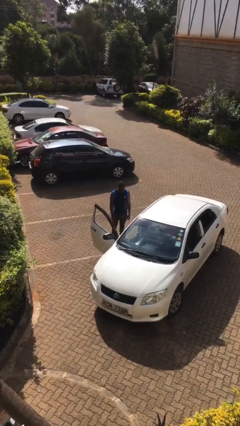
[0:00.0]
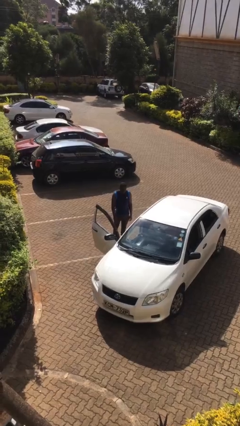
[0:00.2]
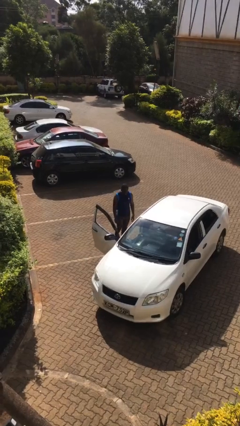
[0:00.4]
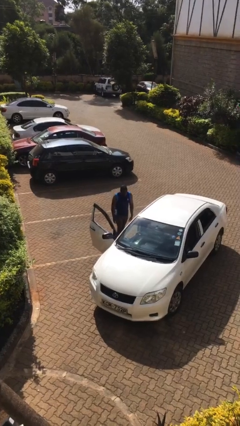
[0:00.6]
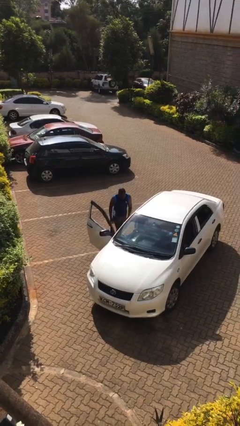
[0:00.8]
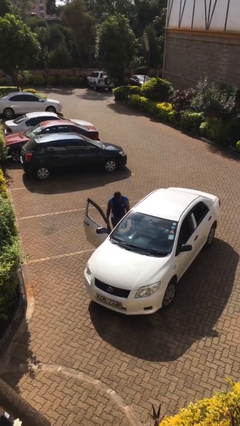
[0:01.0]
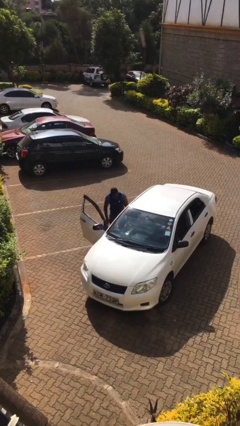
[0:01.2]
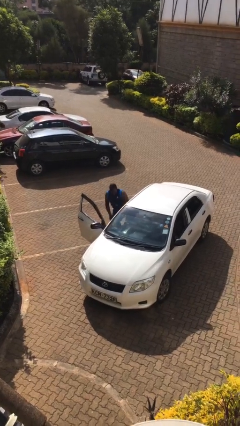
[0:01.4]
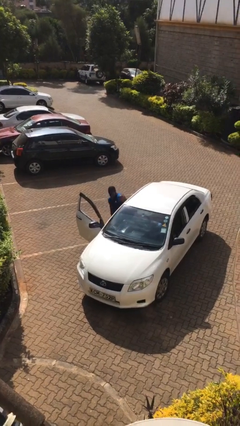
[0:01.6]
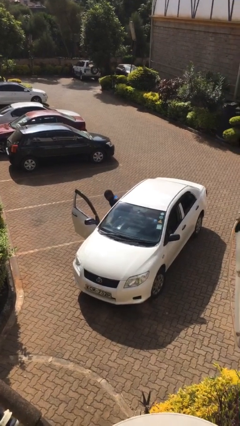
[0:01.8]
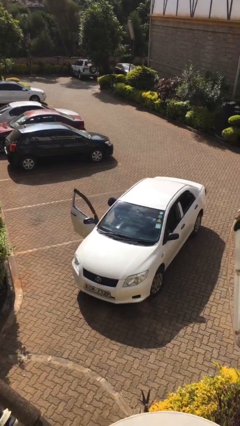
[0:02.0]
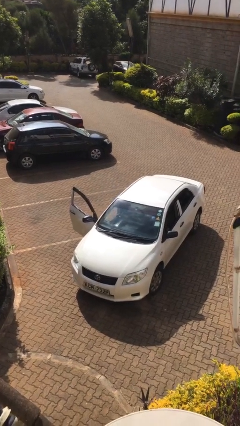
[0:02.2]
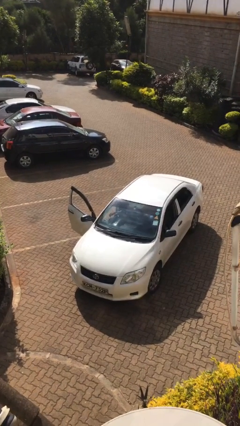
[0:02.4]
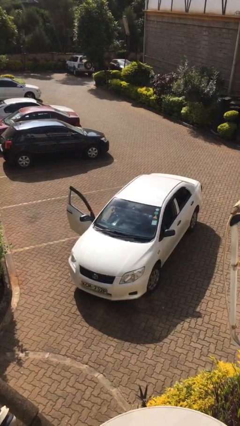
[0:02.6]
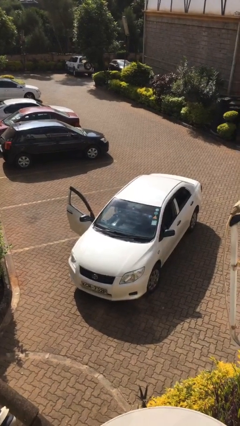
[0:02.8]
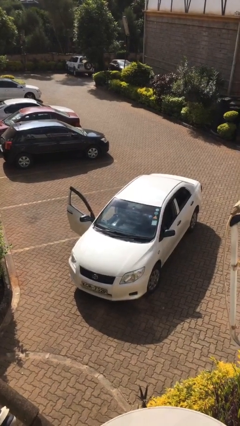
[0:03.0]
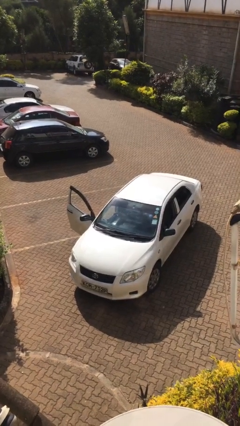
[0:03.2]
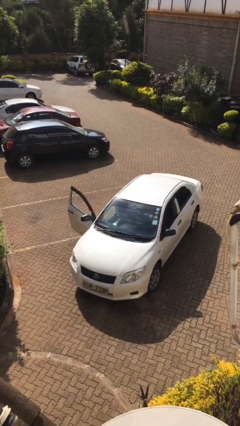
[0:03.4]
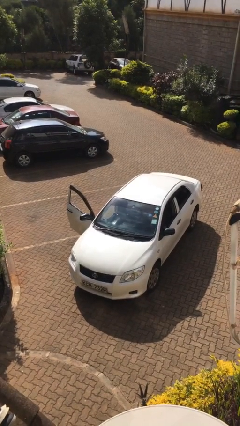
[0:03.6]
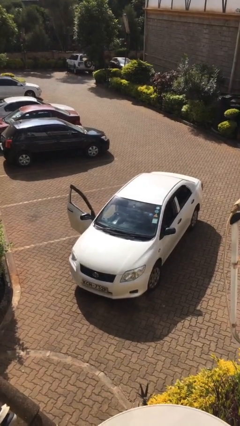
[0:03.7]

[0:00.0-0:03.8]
person enters car

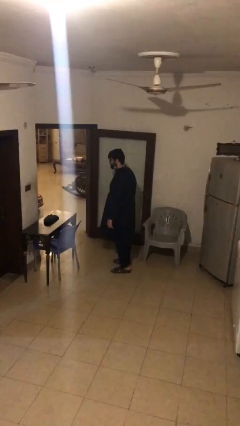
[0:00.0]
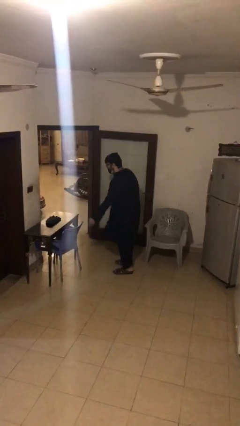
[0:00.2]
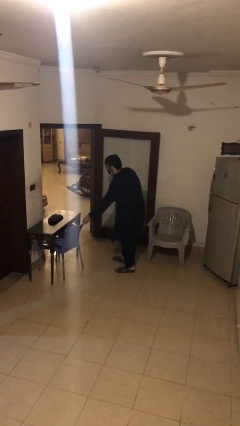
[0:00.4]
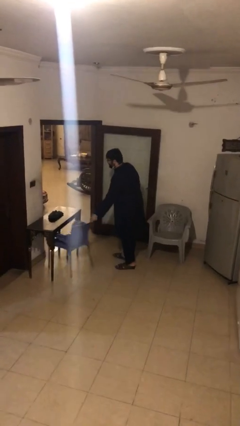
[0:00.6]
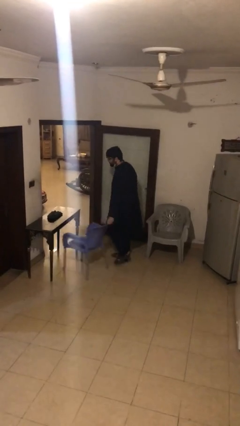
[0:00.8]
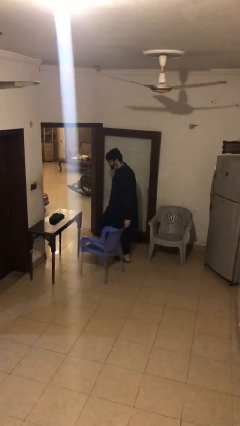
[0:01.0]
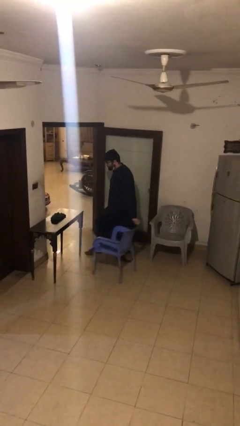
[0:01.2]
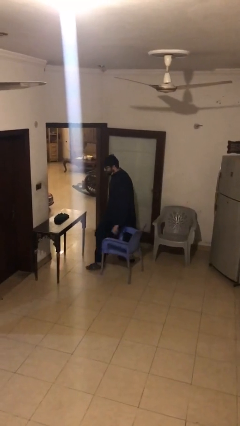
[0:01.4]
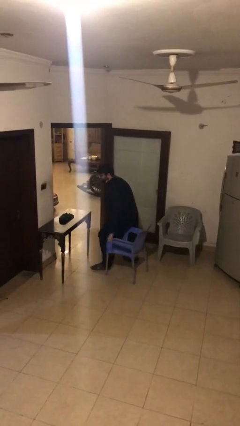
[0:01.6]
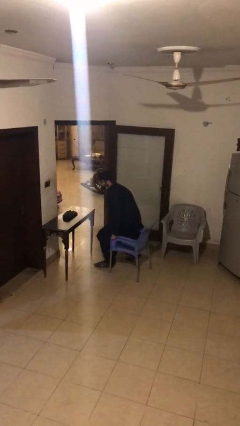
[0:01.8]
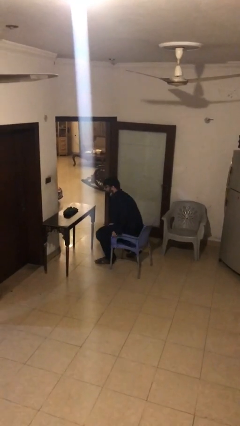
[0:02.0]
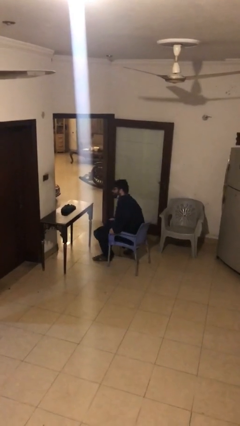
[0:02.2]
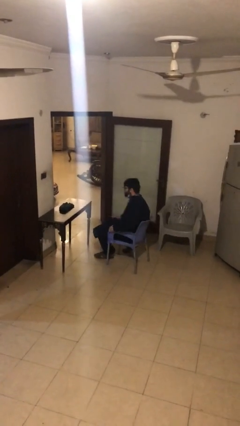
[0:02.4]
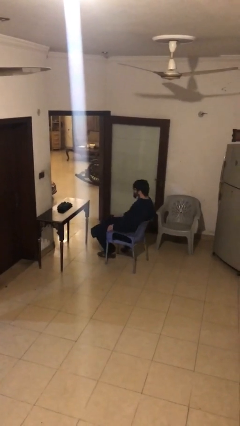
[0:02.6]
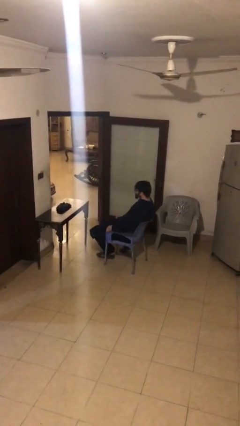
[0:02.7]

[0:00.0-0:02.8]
person sits down

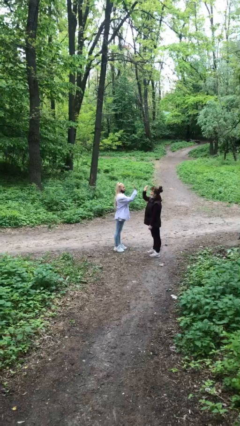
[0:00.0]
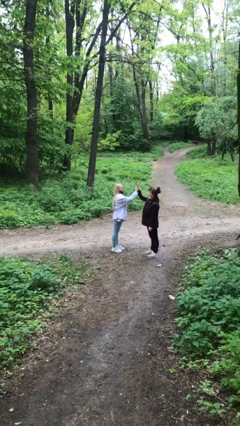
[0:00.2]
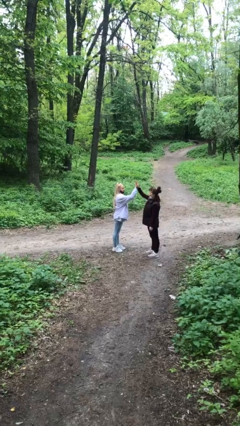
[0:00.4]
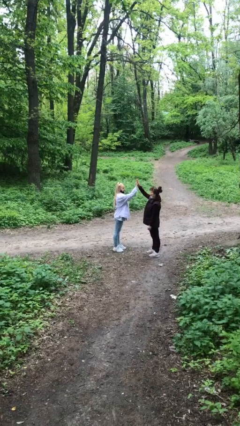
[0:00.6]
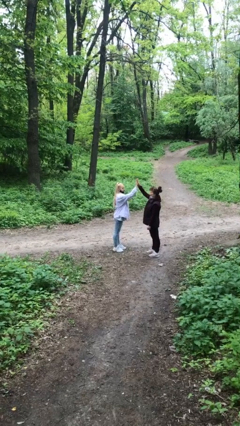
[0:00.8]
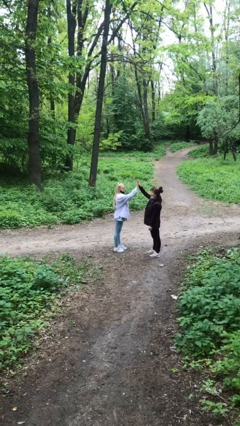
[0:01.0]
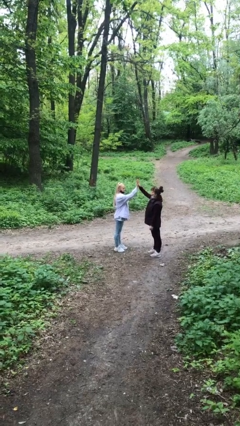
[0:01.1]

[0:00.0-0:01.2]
person highfives hand

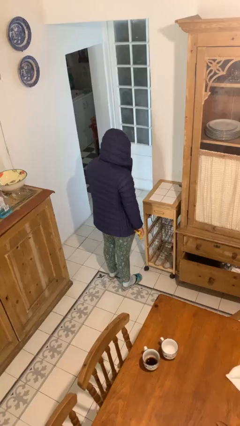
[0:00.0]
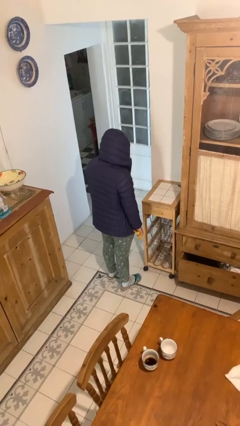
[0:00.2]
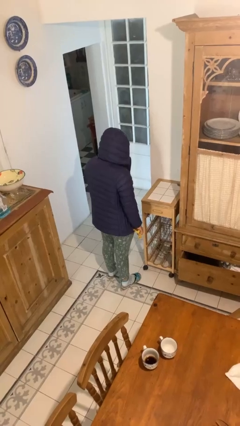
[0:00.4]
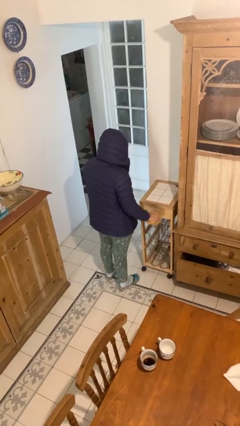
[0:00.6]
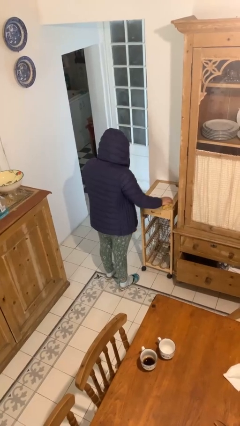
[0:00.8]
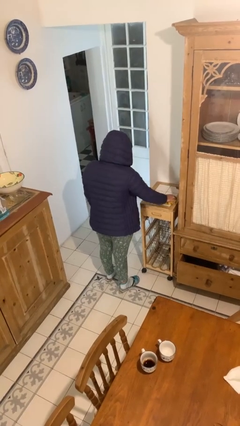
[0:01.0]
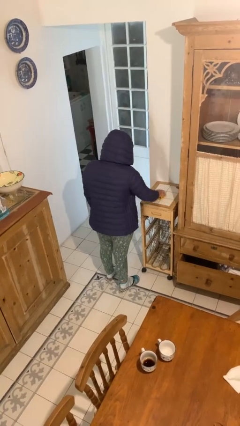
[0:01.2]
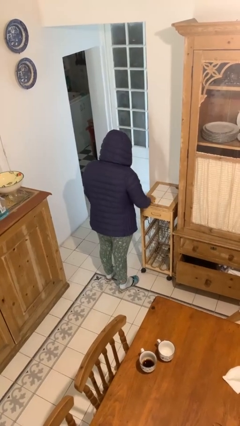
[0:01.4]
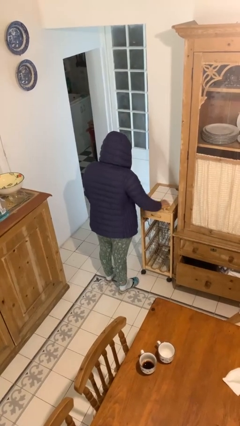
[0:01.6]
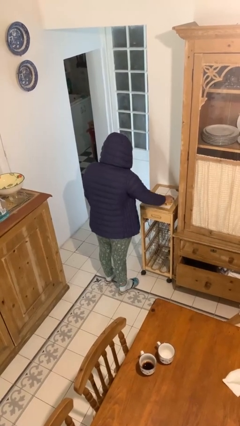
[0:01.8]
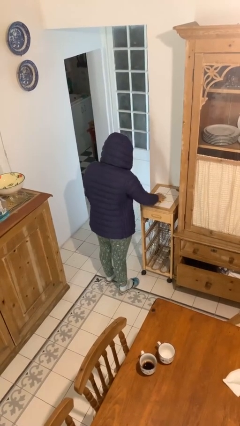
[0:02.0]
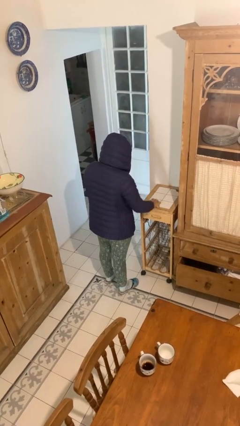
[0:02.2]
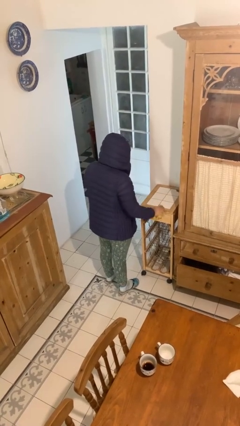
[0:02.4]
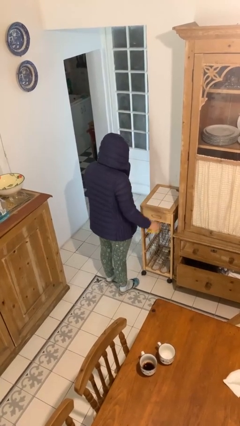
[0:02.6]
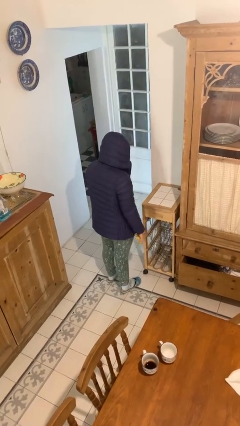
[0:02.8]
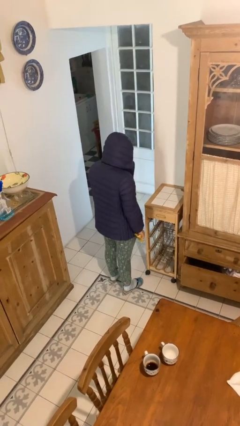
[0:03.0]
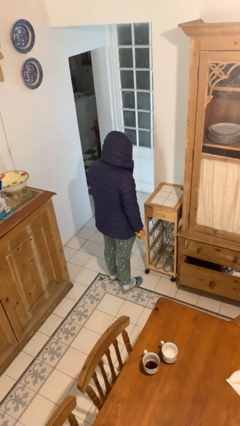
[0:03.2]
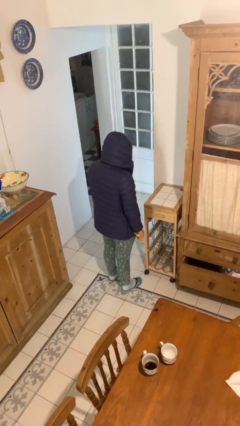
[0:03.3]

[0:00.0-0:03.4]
person cleans table with rag

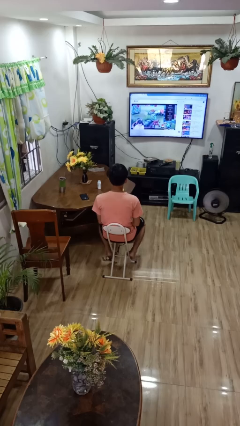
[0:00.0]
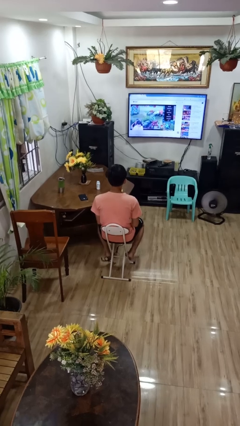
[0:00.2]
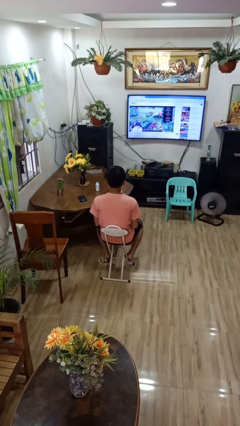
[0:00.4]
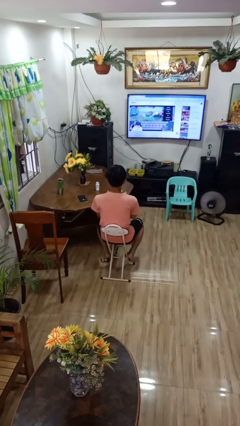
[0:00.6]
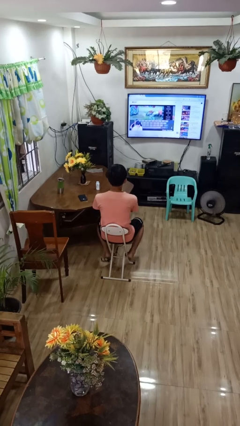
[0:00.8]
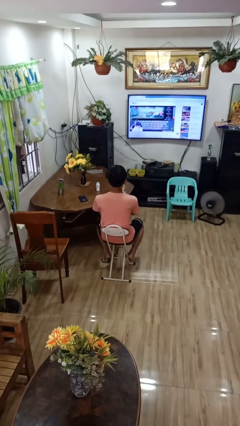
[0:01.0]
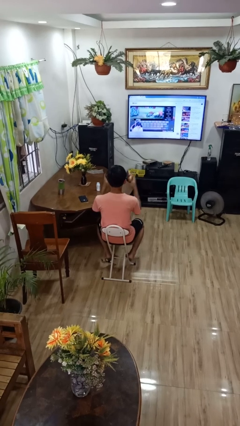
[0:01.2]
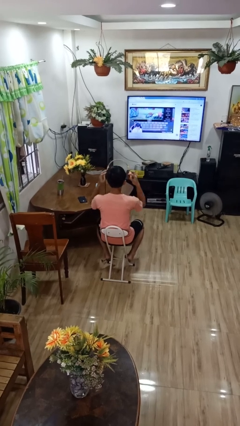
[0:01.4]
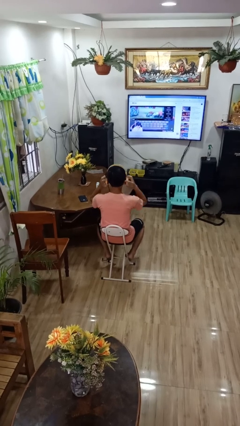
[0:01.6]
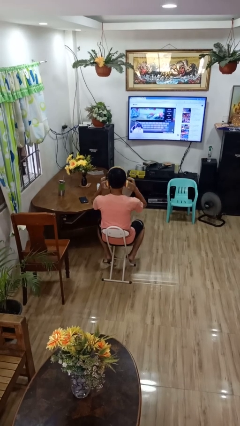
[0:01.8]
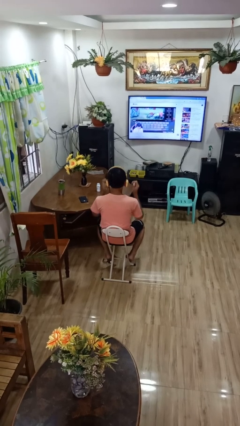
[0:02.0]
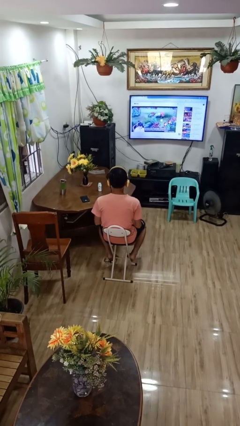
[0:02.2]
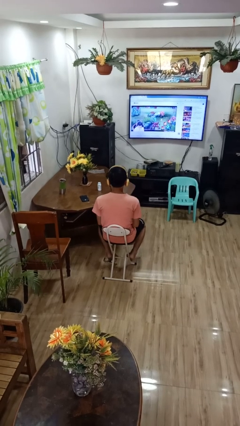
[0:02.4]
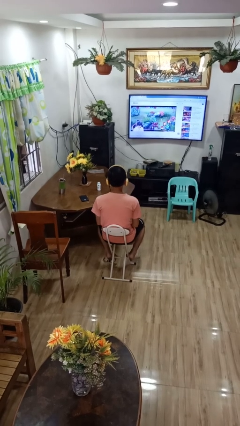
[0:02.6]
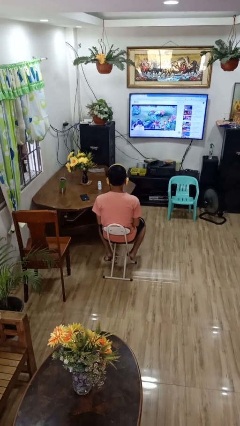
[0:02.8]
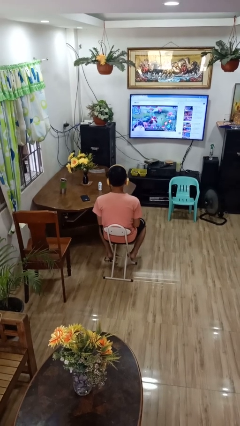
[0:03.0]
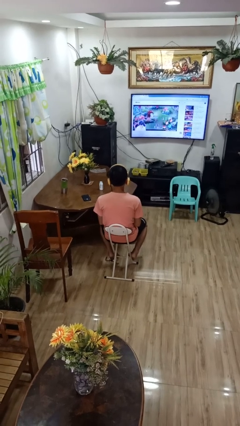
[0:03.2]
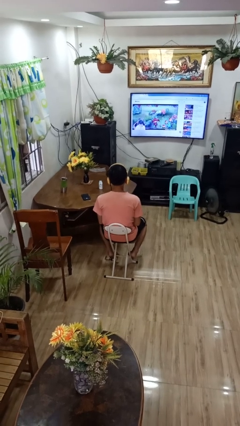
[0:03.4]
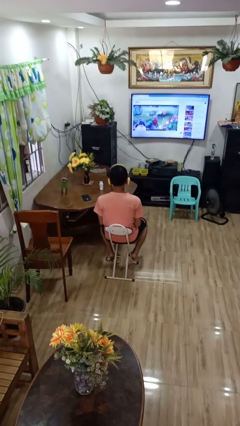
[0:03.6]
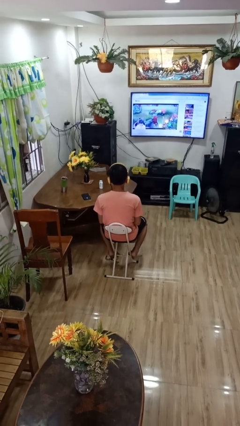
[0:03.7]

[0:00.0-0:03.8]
person puts on headphones

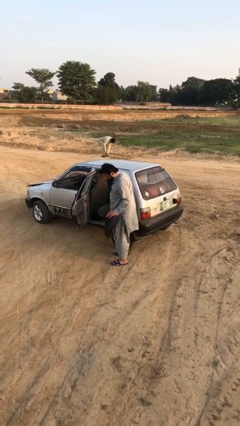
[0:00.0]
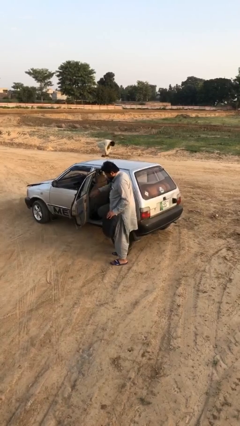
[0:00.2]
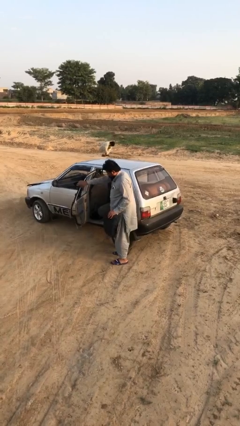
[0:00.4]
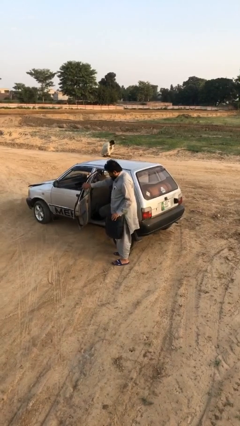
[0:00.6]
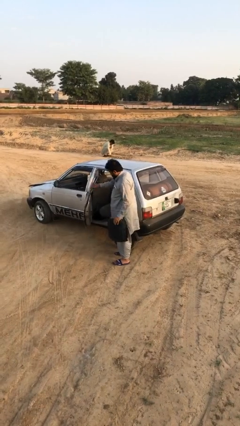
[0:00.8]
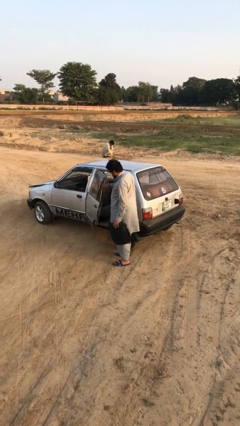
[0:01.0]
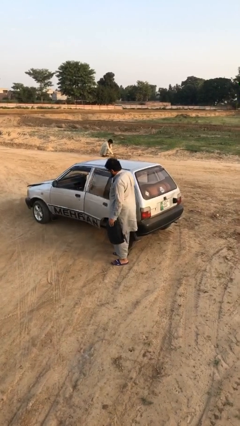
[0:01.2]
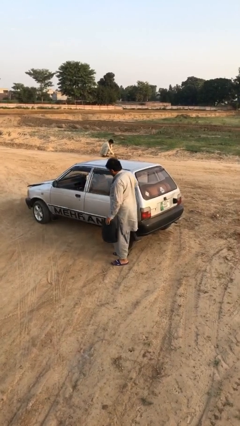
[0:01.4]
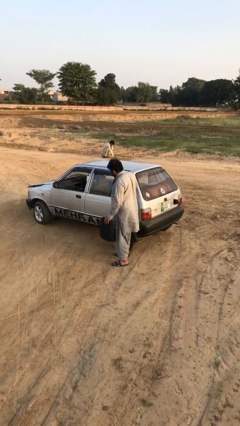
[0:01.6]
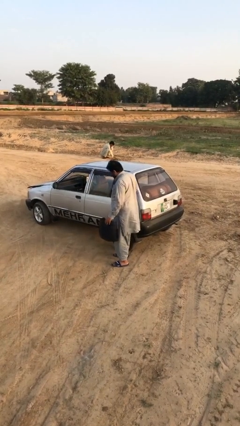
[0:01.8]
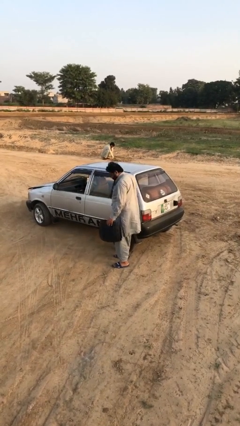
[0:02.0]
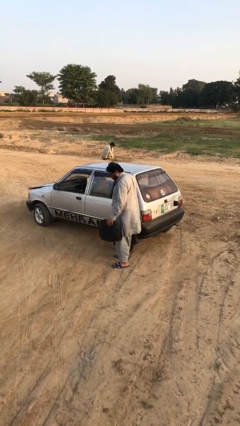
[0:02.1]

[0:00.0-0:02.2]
person closes car door

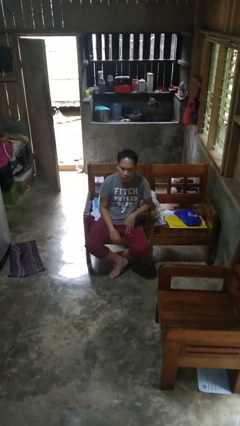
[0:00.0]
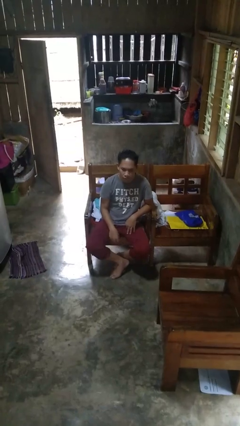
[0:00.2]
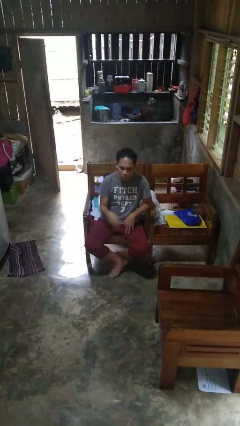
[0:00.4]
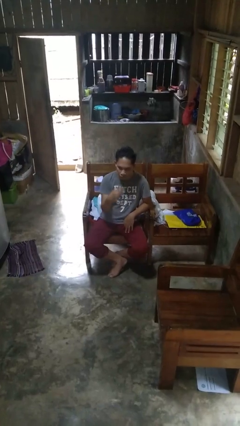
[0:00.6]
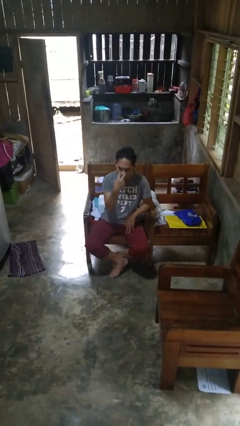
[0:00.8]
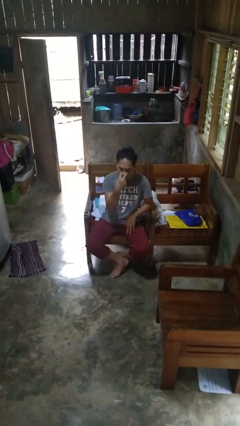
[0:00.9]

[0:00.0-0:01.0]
person gestures watch closely
